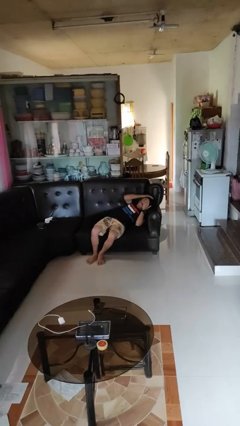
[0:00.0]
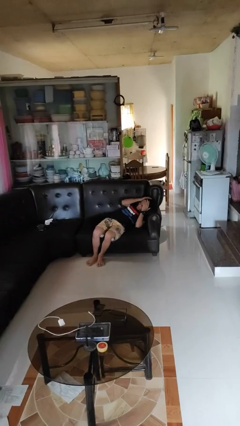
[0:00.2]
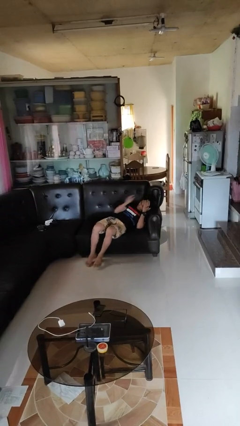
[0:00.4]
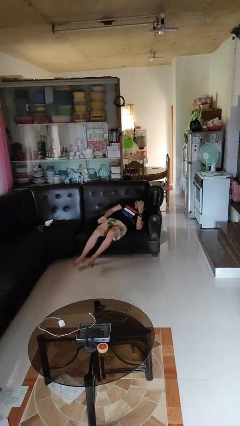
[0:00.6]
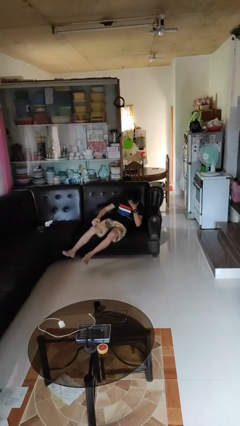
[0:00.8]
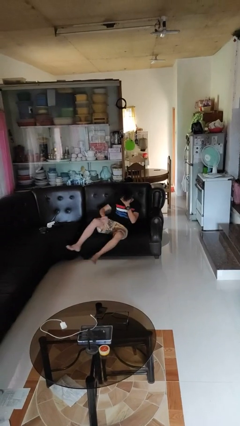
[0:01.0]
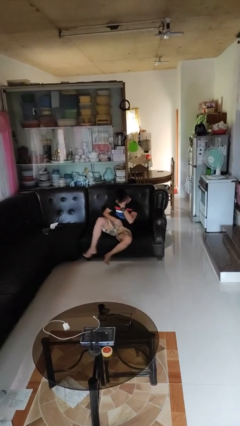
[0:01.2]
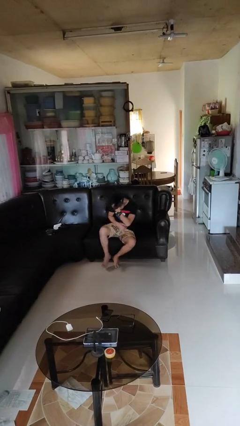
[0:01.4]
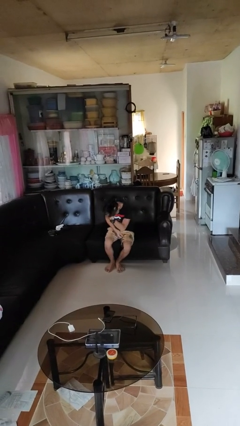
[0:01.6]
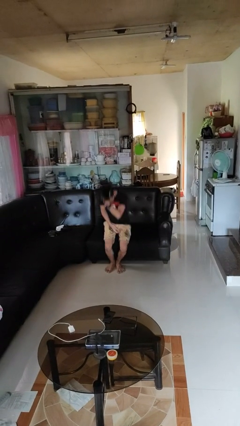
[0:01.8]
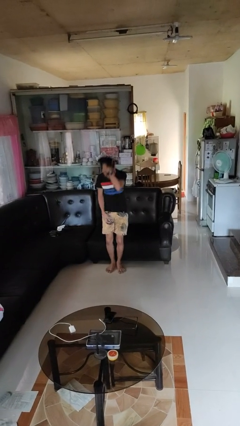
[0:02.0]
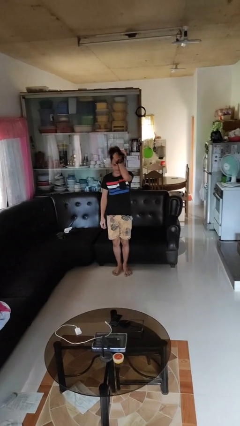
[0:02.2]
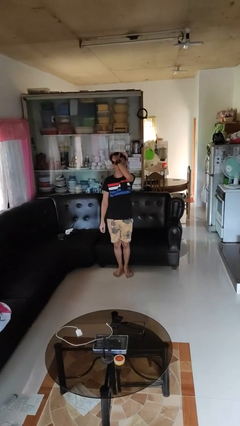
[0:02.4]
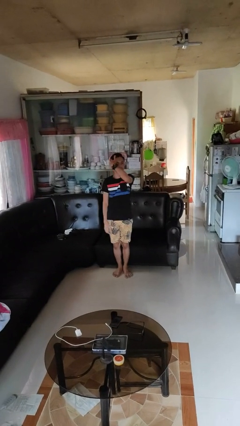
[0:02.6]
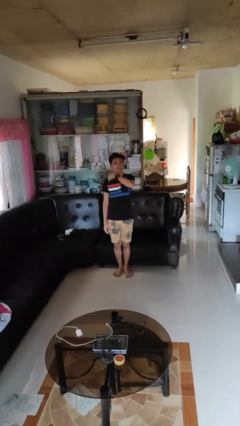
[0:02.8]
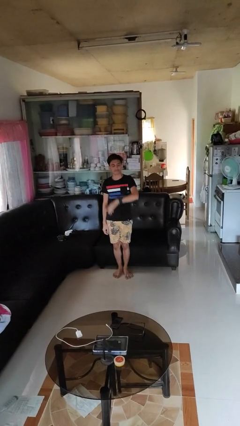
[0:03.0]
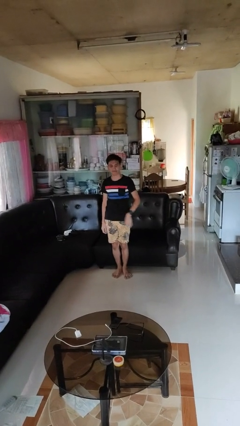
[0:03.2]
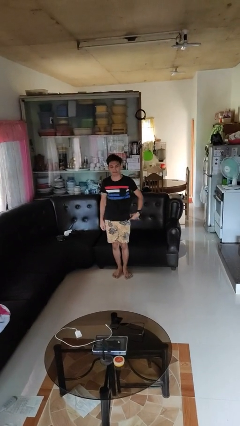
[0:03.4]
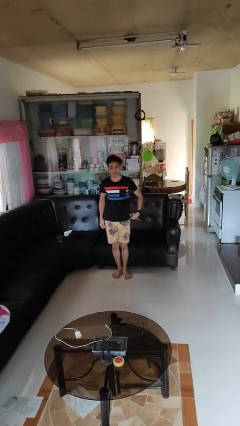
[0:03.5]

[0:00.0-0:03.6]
person stands up

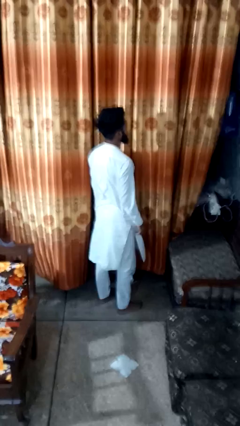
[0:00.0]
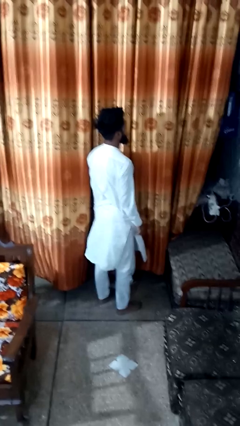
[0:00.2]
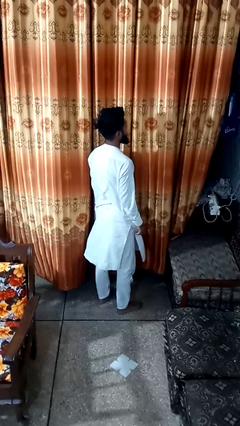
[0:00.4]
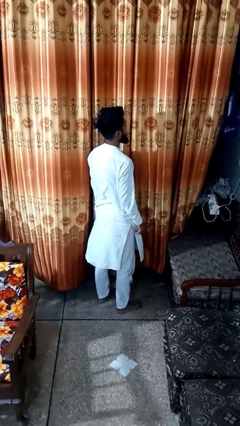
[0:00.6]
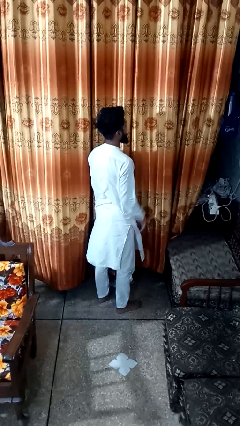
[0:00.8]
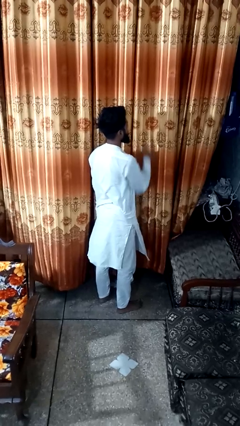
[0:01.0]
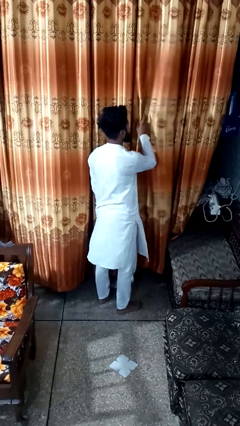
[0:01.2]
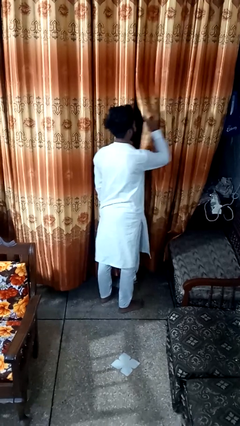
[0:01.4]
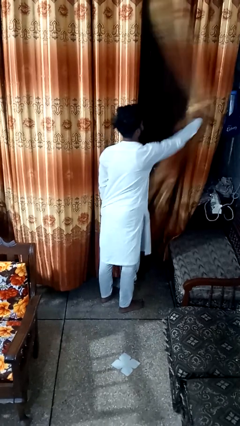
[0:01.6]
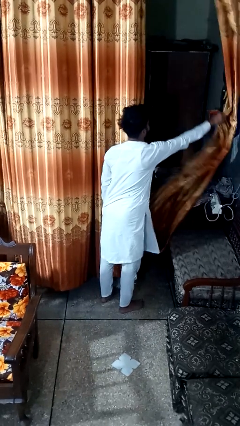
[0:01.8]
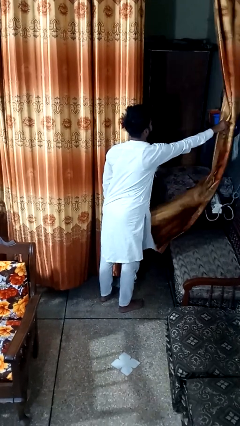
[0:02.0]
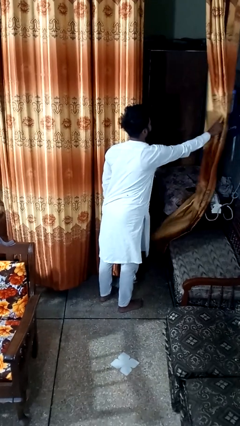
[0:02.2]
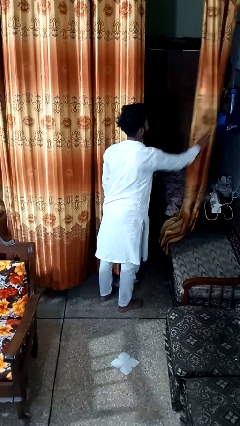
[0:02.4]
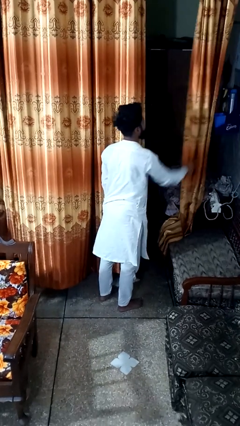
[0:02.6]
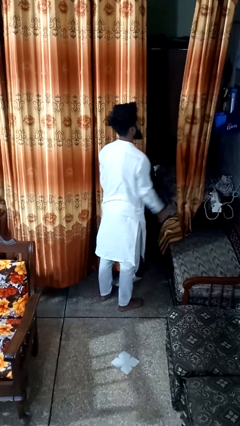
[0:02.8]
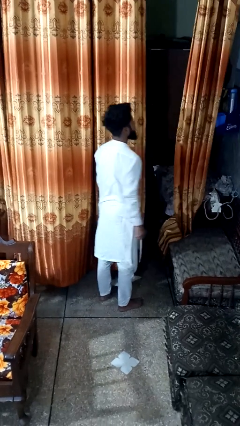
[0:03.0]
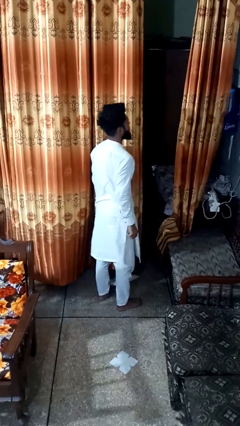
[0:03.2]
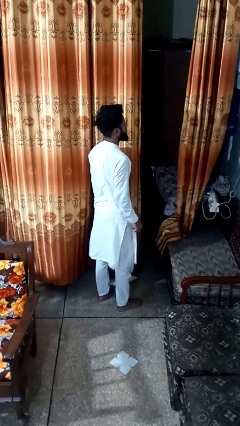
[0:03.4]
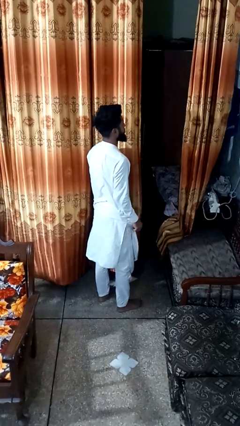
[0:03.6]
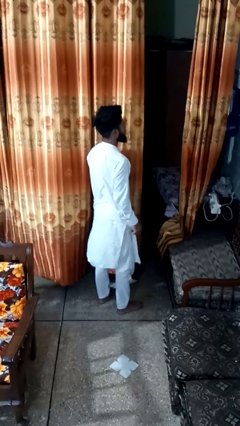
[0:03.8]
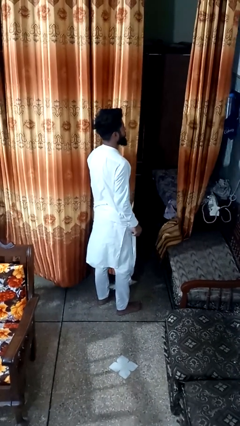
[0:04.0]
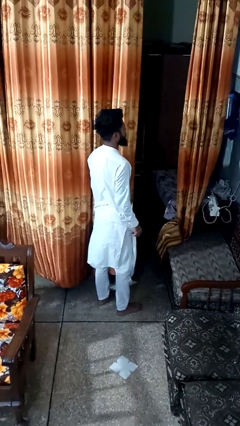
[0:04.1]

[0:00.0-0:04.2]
person opens curtains

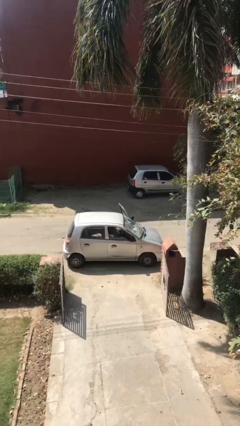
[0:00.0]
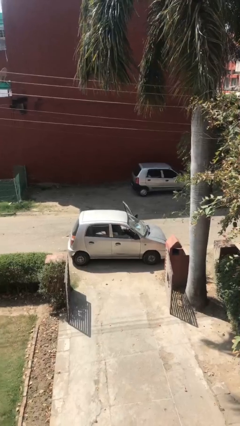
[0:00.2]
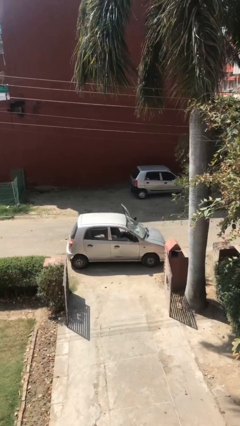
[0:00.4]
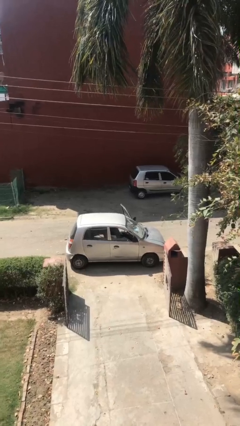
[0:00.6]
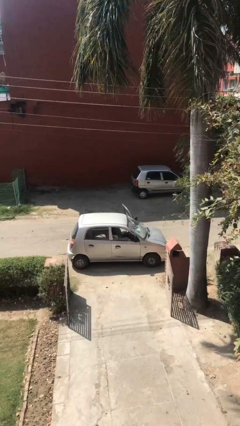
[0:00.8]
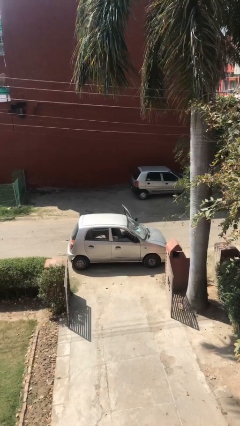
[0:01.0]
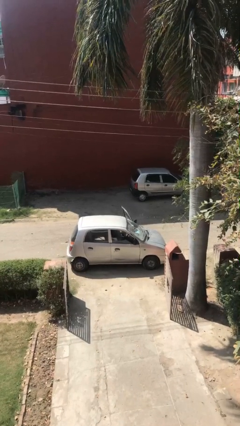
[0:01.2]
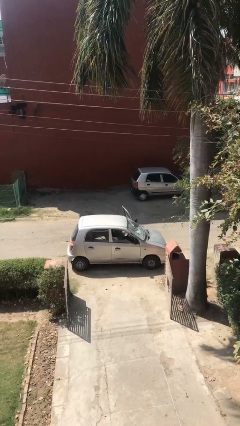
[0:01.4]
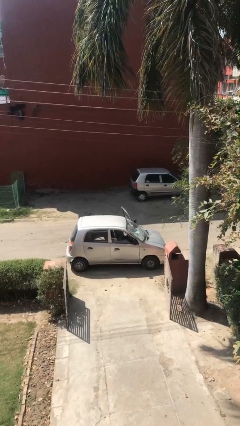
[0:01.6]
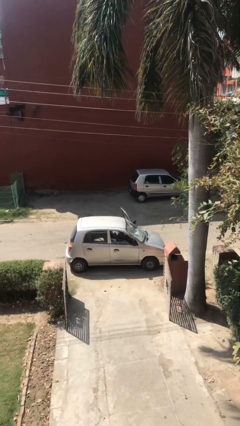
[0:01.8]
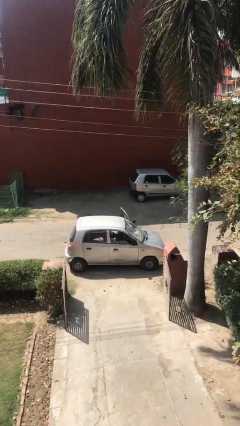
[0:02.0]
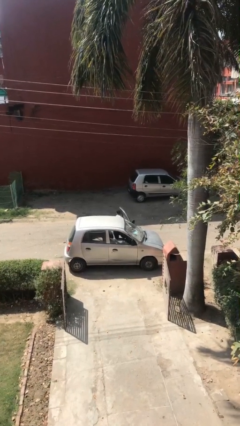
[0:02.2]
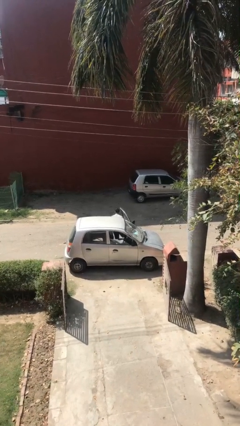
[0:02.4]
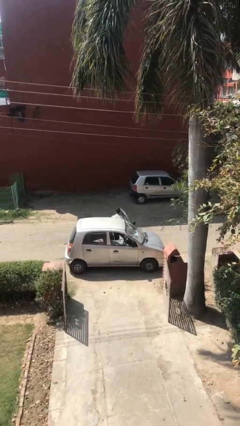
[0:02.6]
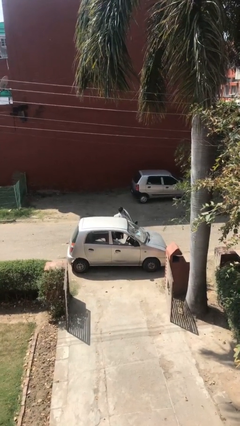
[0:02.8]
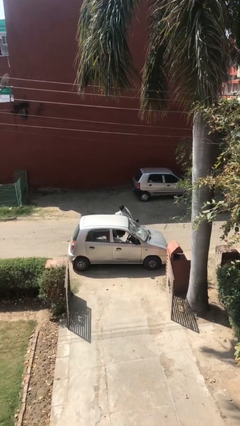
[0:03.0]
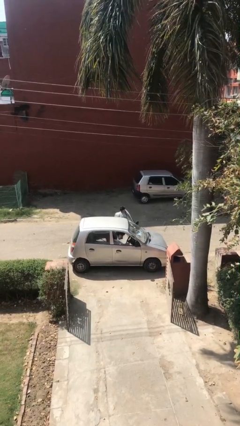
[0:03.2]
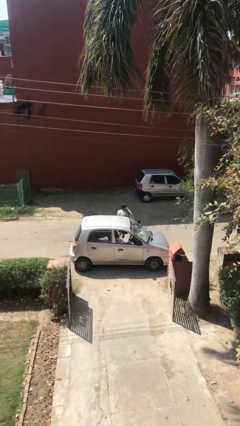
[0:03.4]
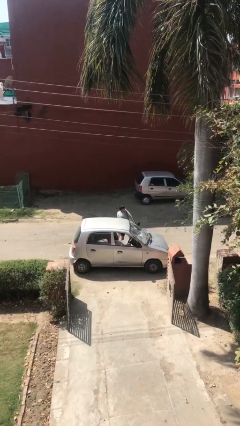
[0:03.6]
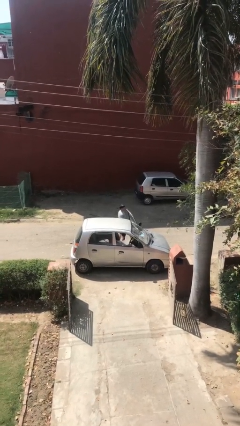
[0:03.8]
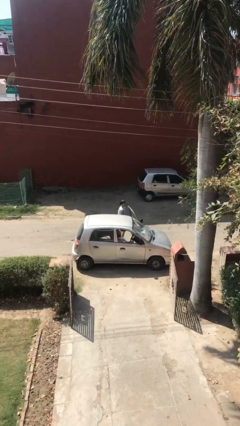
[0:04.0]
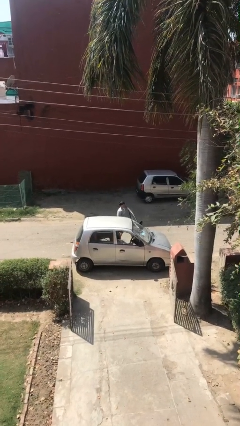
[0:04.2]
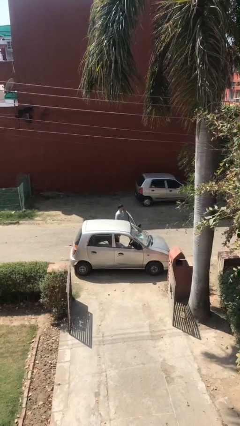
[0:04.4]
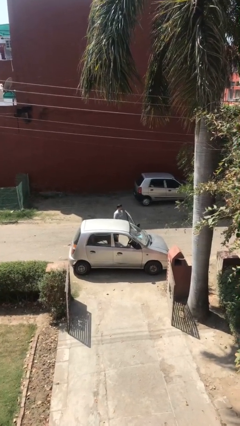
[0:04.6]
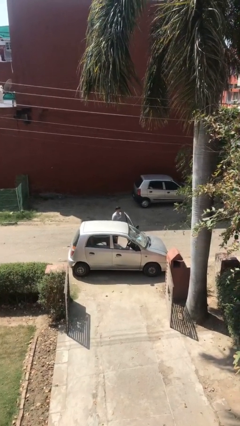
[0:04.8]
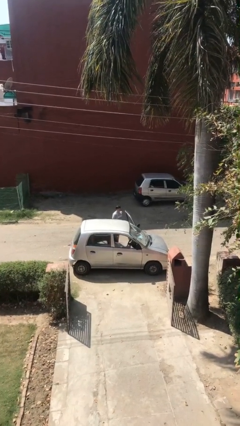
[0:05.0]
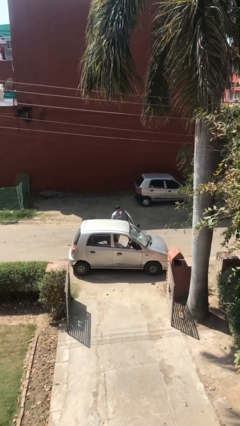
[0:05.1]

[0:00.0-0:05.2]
person exits car

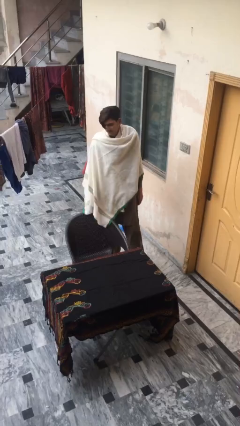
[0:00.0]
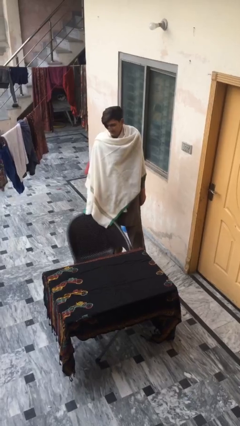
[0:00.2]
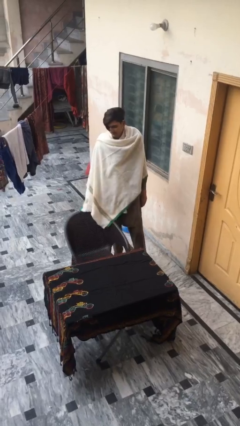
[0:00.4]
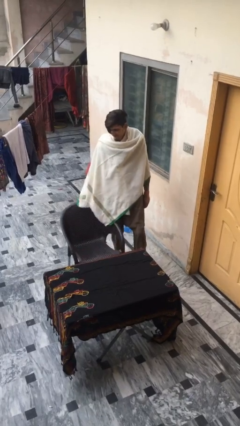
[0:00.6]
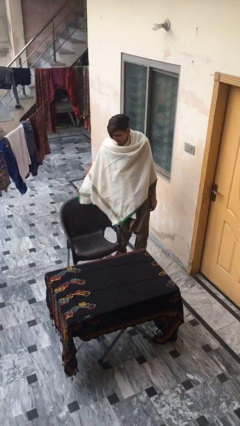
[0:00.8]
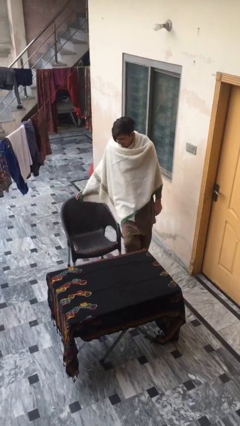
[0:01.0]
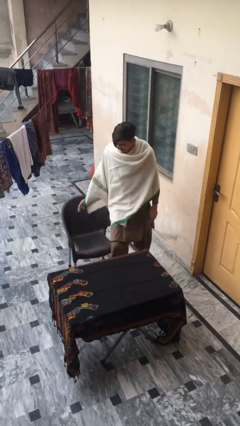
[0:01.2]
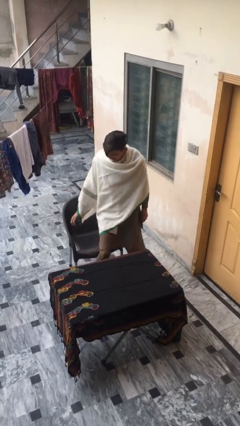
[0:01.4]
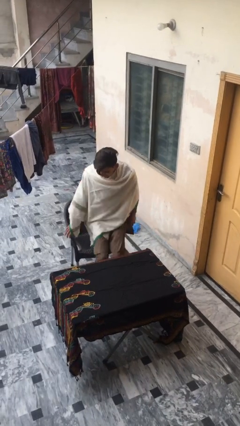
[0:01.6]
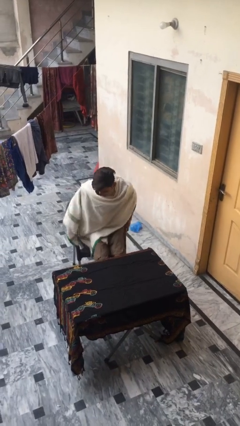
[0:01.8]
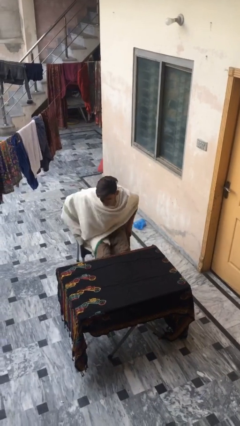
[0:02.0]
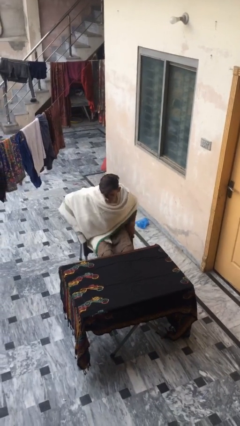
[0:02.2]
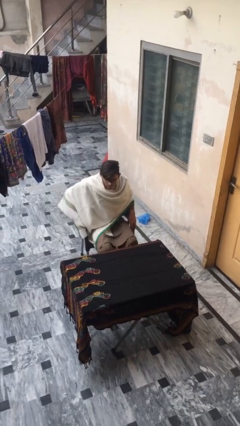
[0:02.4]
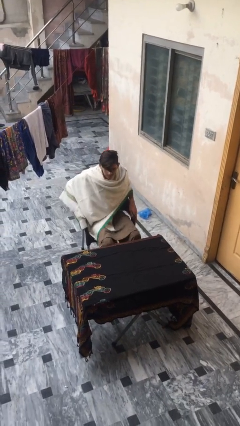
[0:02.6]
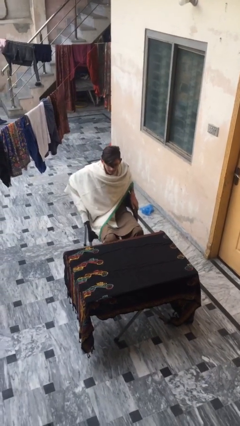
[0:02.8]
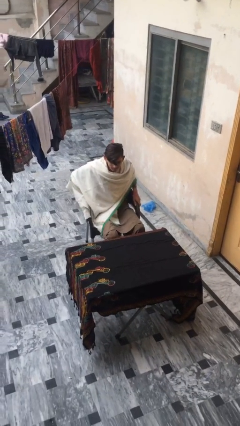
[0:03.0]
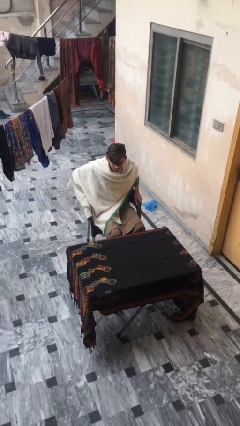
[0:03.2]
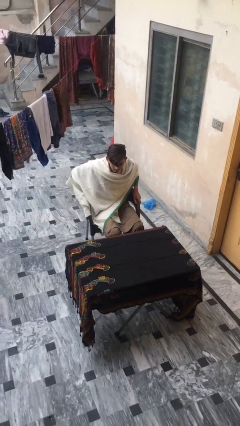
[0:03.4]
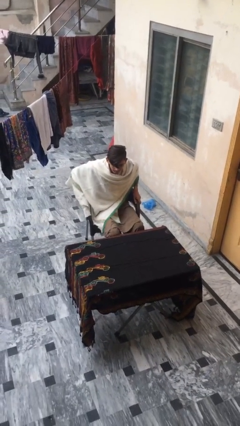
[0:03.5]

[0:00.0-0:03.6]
person sits down

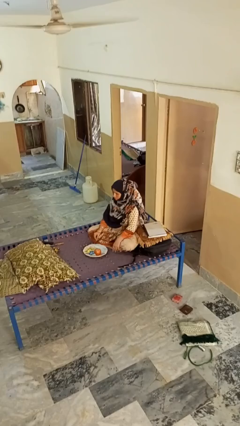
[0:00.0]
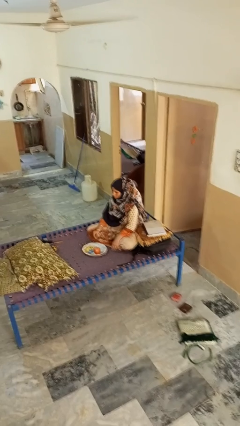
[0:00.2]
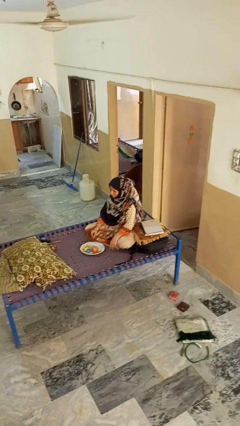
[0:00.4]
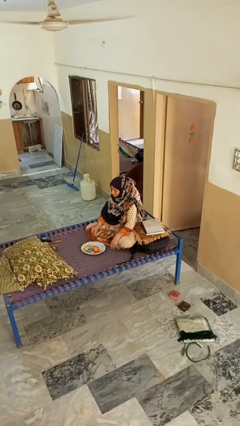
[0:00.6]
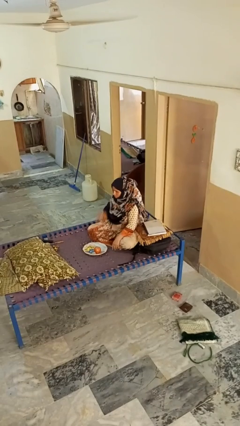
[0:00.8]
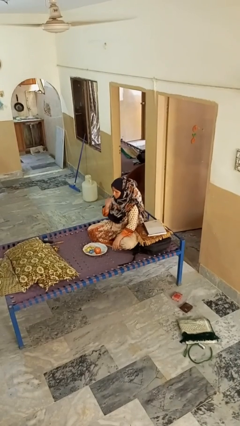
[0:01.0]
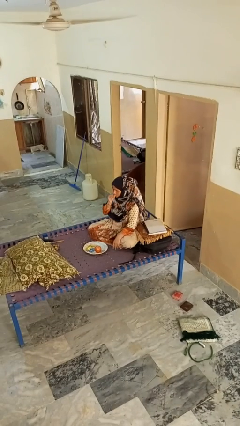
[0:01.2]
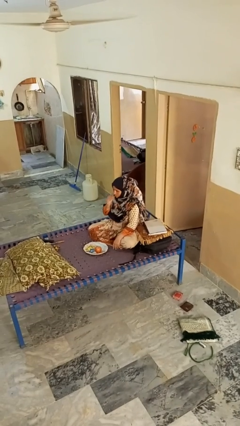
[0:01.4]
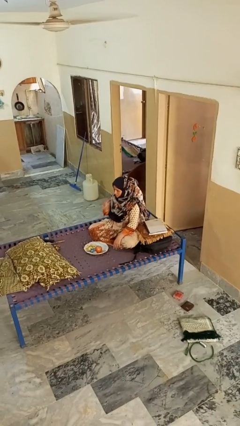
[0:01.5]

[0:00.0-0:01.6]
person eats apple
